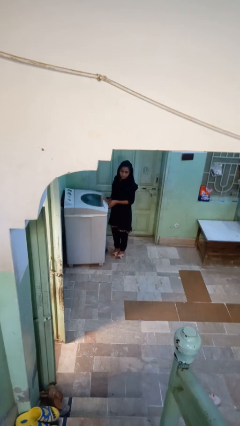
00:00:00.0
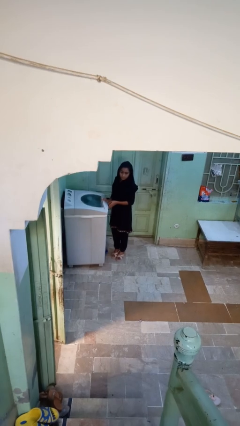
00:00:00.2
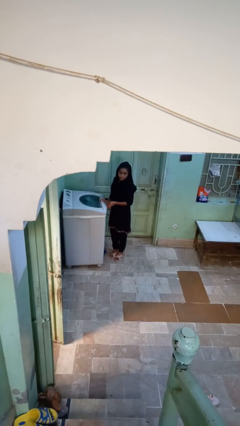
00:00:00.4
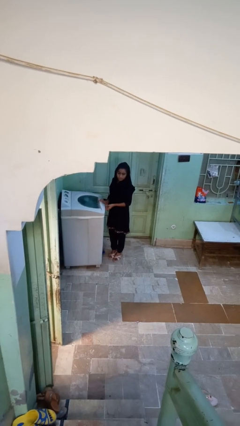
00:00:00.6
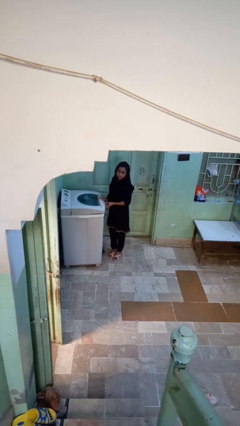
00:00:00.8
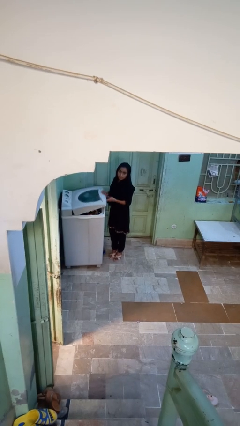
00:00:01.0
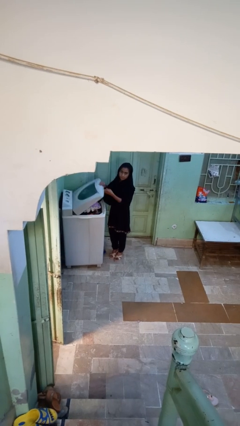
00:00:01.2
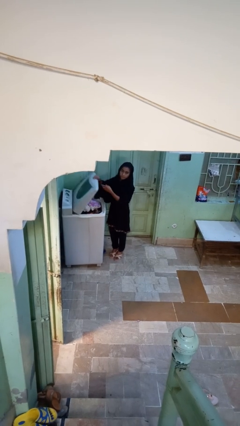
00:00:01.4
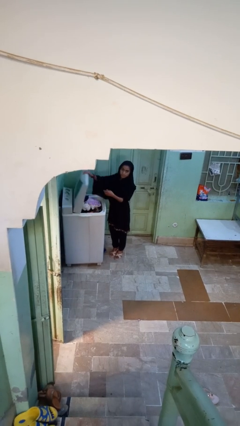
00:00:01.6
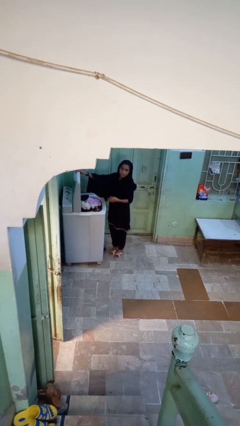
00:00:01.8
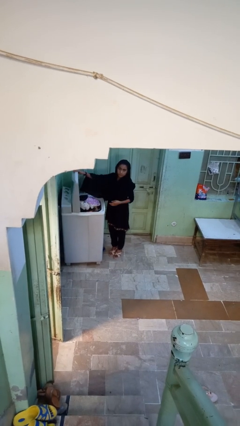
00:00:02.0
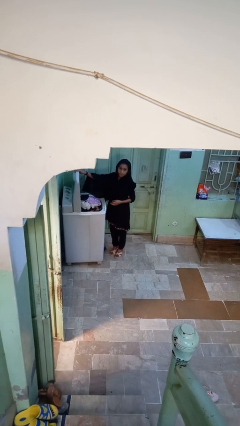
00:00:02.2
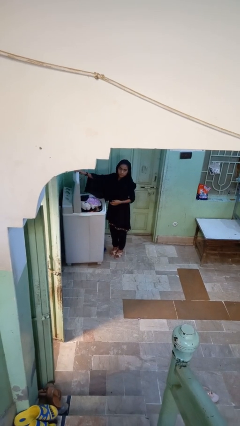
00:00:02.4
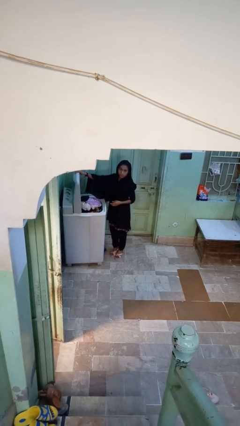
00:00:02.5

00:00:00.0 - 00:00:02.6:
person opens clothes washer

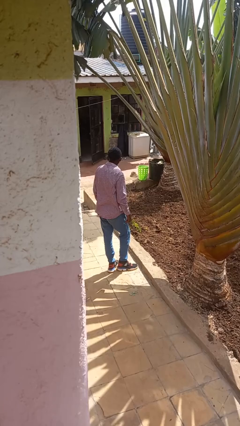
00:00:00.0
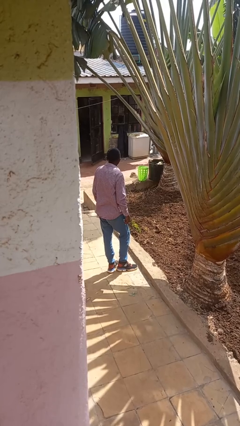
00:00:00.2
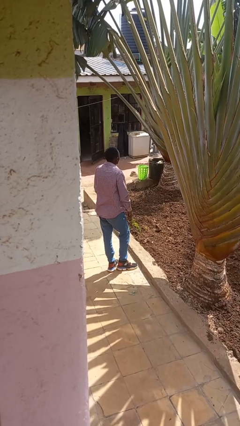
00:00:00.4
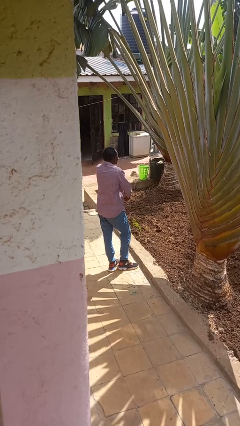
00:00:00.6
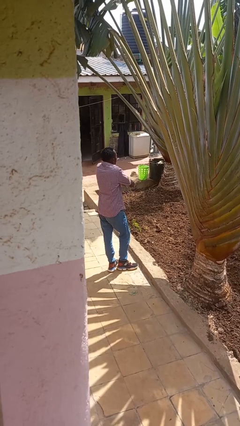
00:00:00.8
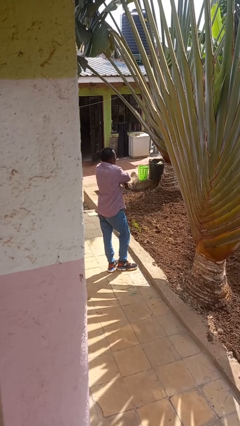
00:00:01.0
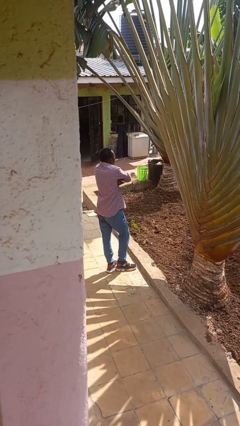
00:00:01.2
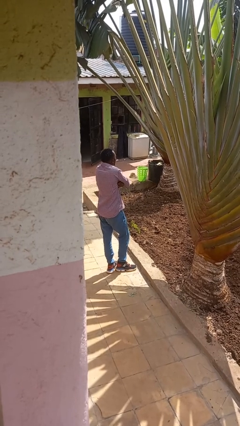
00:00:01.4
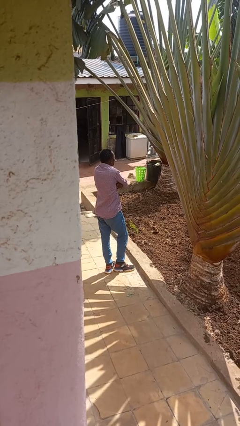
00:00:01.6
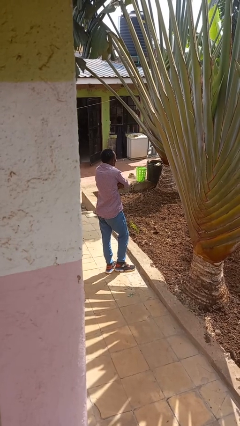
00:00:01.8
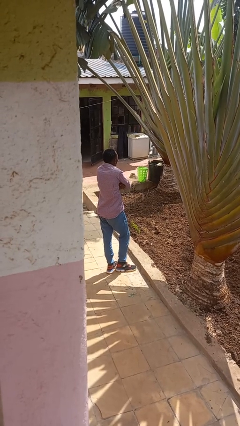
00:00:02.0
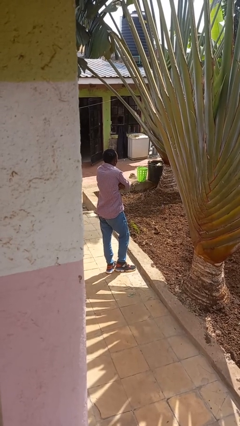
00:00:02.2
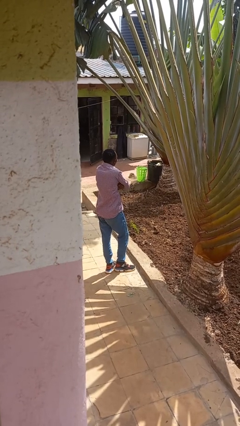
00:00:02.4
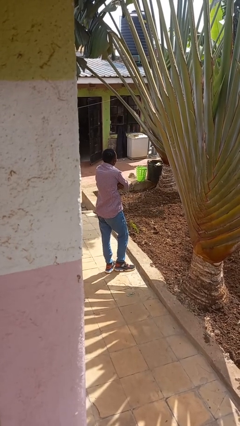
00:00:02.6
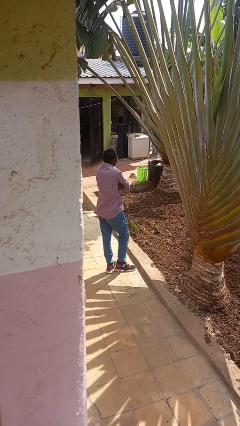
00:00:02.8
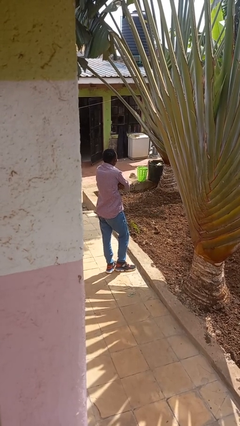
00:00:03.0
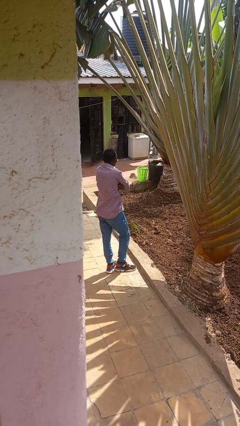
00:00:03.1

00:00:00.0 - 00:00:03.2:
person crosses arms

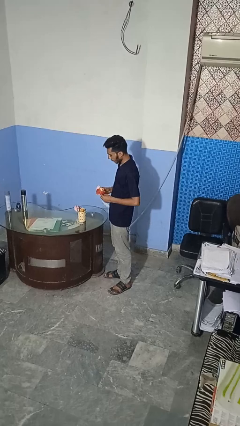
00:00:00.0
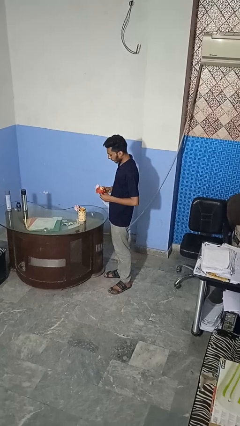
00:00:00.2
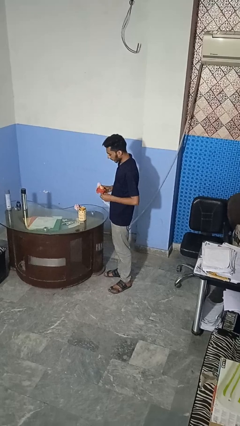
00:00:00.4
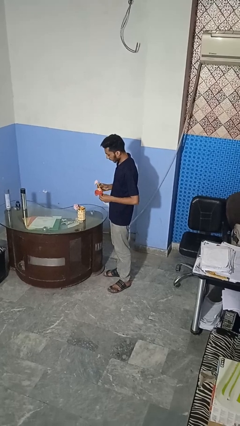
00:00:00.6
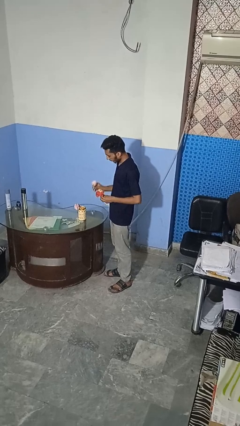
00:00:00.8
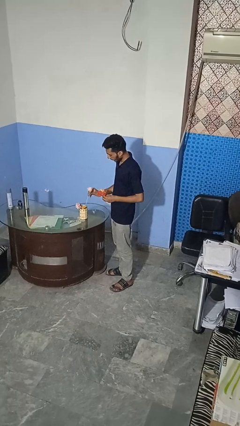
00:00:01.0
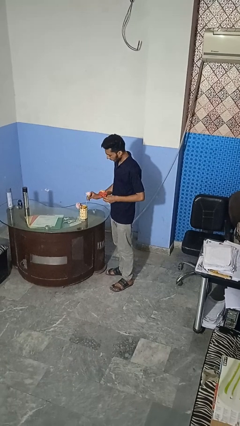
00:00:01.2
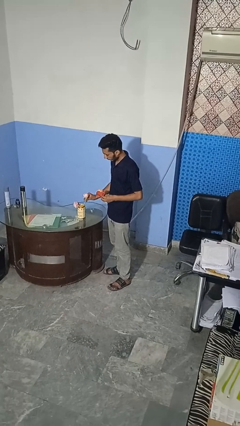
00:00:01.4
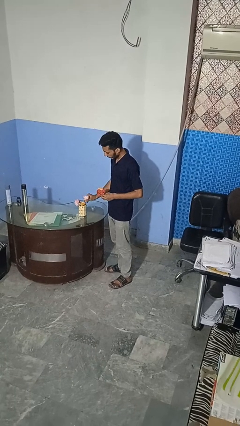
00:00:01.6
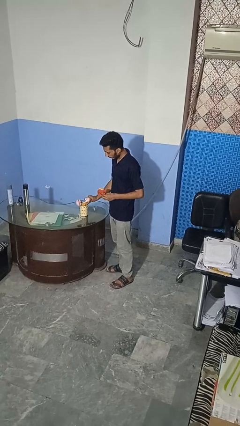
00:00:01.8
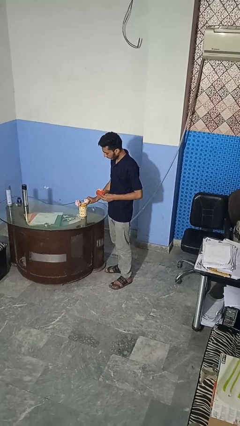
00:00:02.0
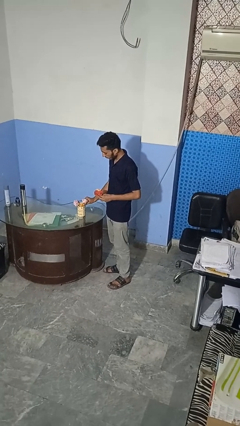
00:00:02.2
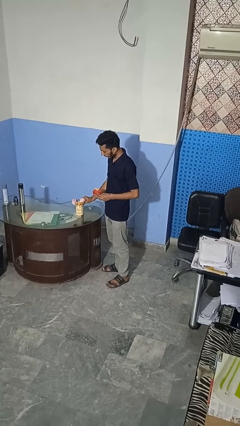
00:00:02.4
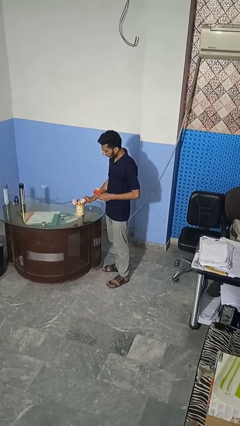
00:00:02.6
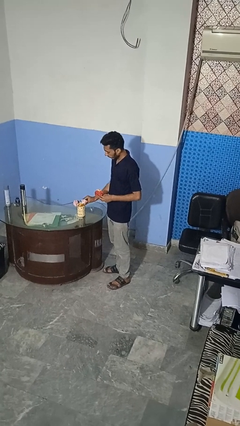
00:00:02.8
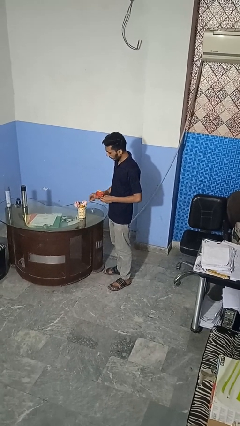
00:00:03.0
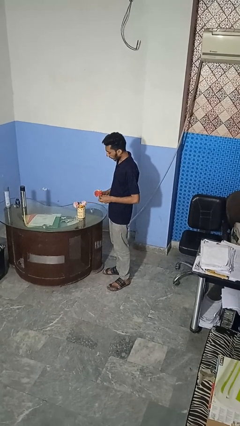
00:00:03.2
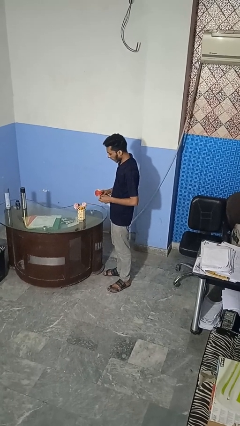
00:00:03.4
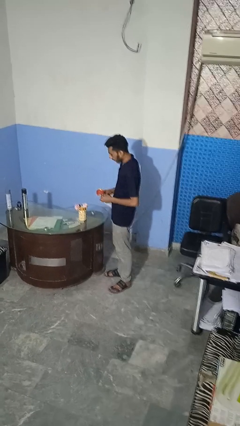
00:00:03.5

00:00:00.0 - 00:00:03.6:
person arranges flowers in vase

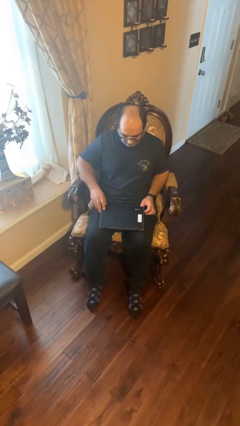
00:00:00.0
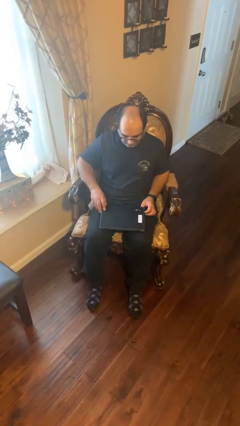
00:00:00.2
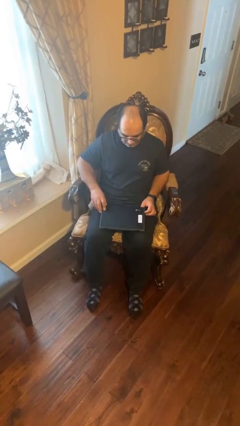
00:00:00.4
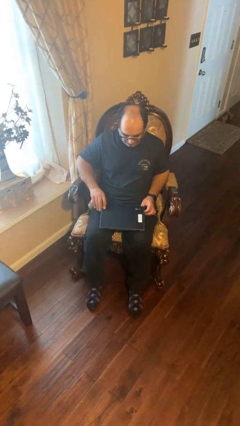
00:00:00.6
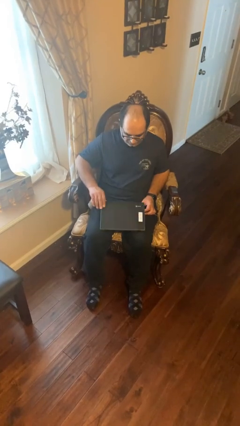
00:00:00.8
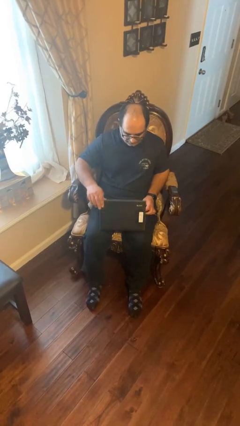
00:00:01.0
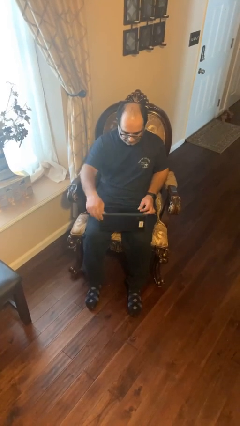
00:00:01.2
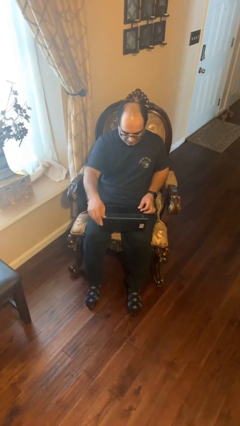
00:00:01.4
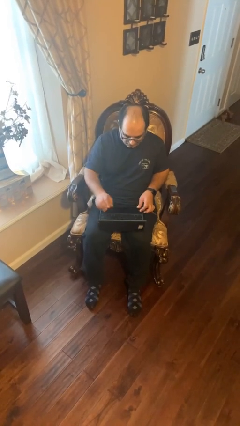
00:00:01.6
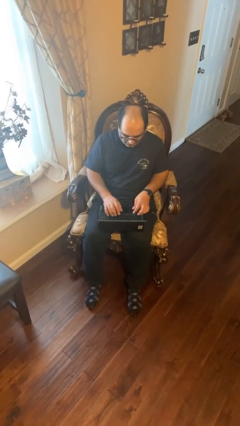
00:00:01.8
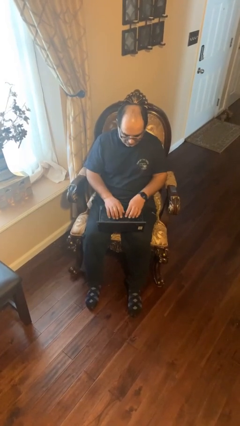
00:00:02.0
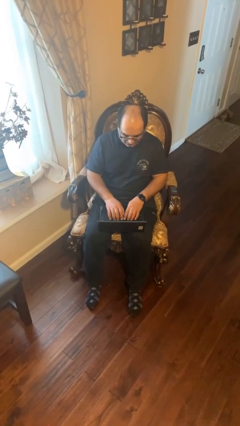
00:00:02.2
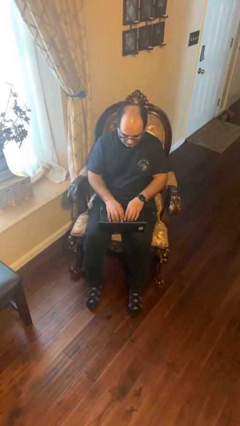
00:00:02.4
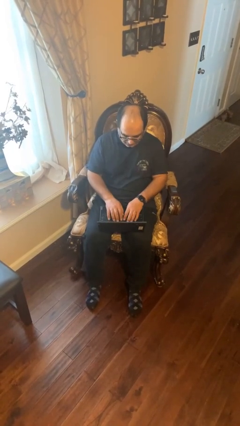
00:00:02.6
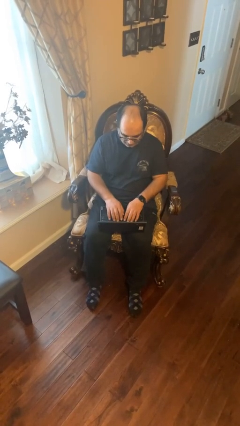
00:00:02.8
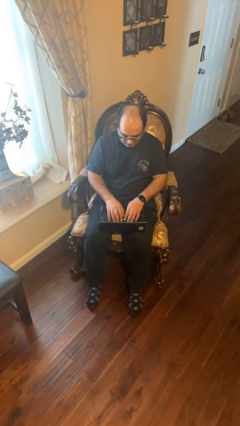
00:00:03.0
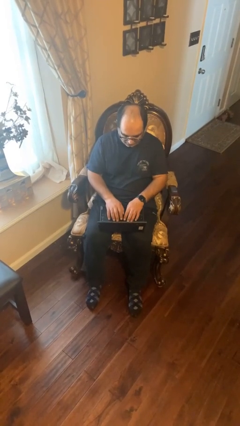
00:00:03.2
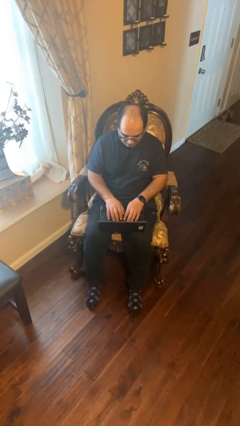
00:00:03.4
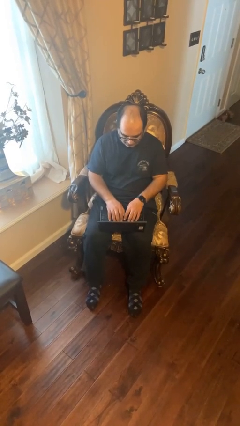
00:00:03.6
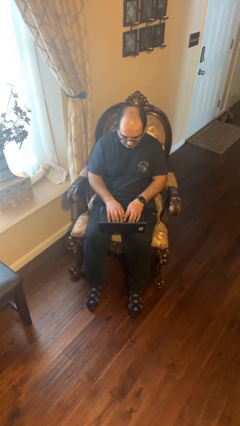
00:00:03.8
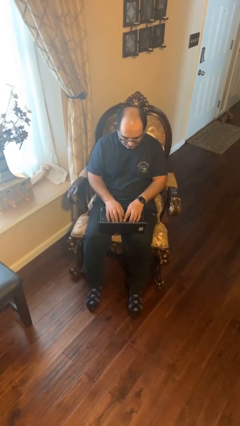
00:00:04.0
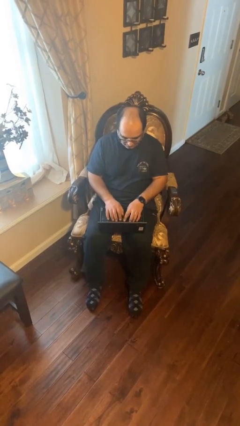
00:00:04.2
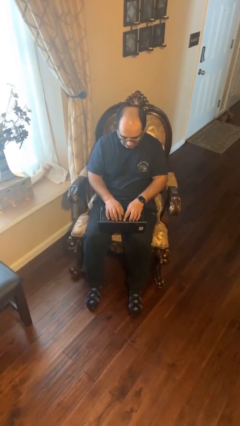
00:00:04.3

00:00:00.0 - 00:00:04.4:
person interacts with laptop

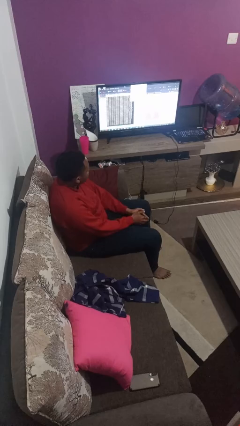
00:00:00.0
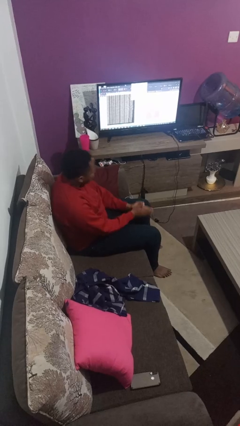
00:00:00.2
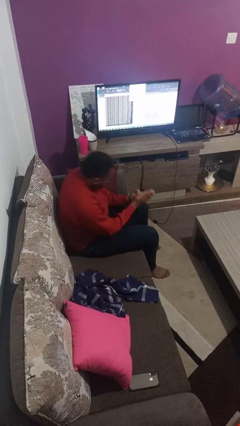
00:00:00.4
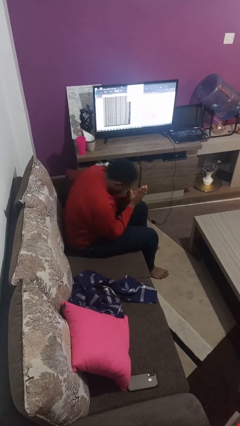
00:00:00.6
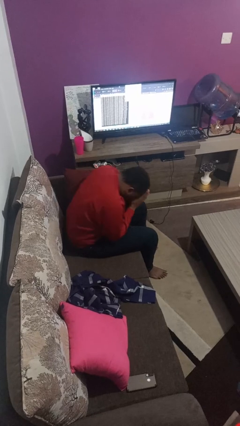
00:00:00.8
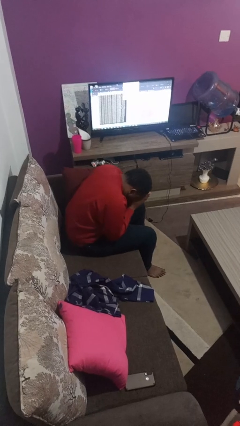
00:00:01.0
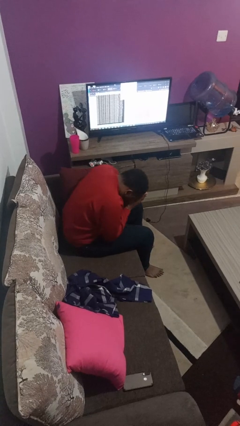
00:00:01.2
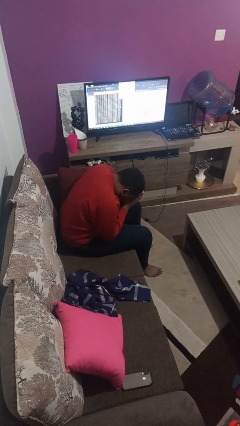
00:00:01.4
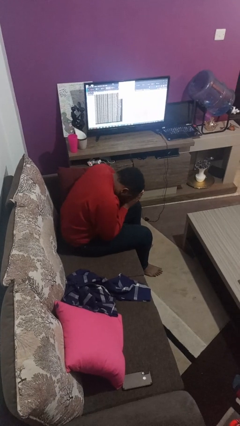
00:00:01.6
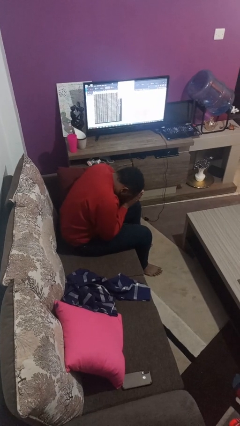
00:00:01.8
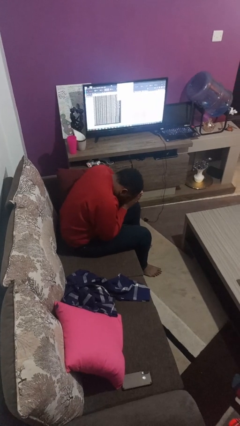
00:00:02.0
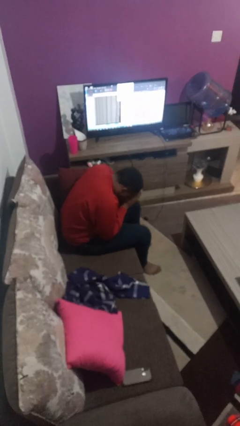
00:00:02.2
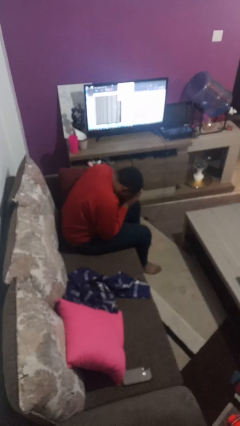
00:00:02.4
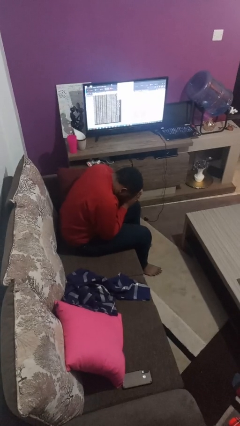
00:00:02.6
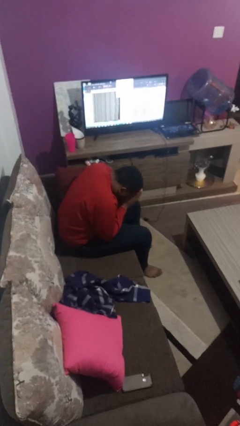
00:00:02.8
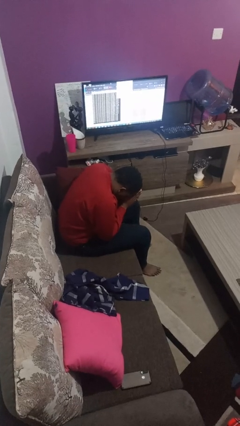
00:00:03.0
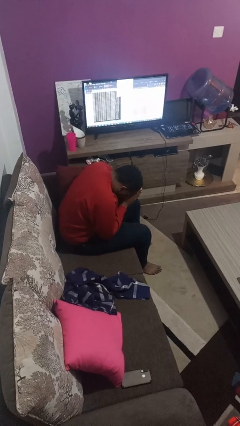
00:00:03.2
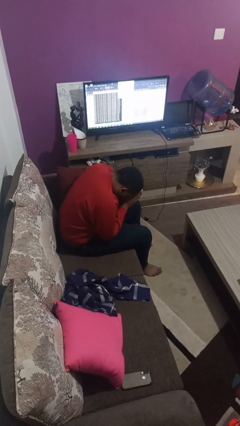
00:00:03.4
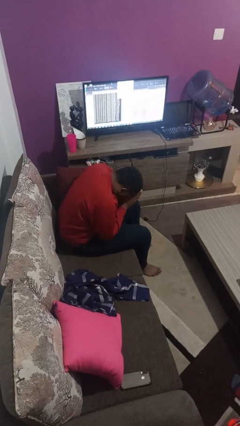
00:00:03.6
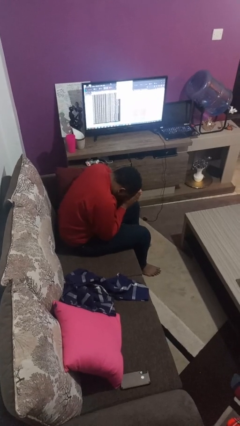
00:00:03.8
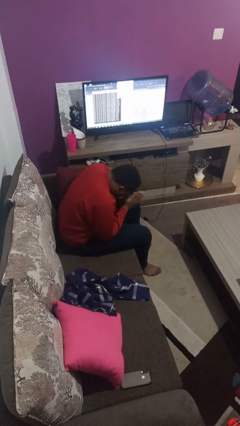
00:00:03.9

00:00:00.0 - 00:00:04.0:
person prays
